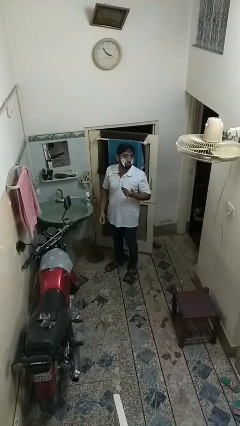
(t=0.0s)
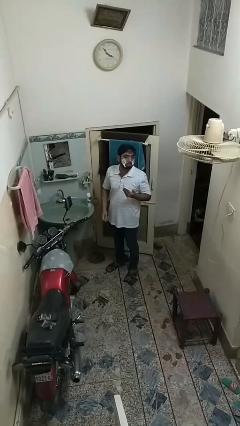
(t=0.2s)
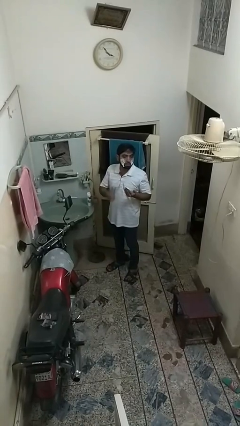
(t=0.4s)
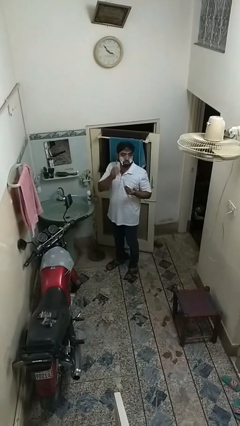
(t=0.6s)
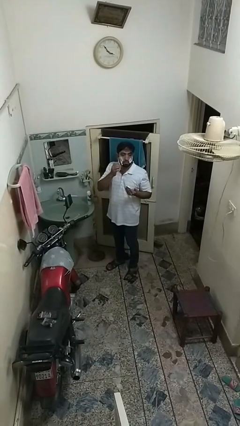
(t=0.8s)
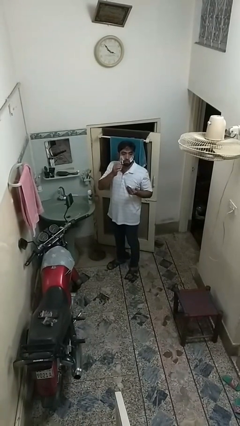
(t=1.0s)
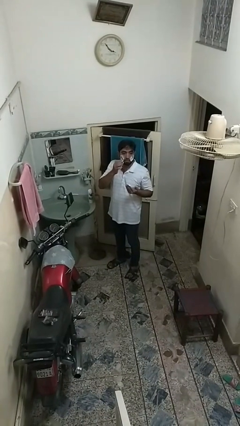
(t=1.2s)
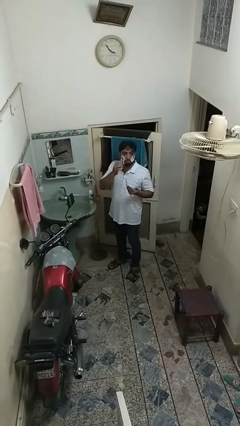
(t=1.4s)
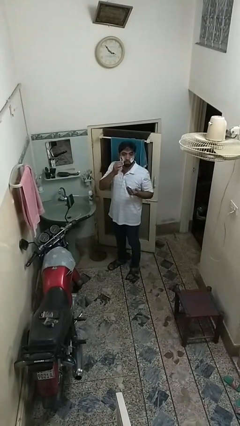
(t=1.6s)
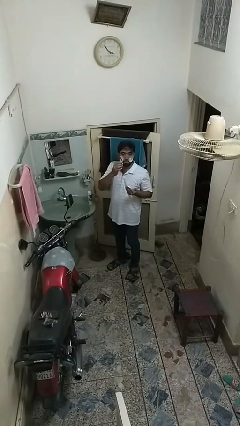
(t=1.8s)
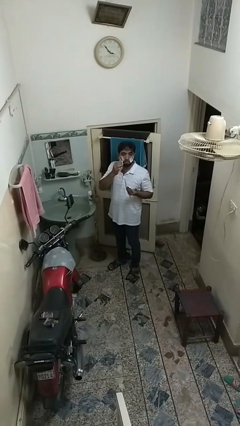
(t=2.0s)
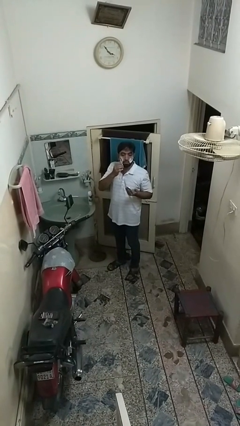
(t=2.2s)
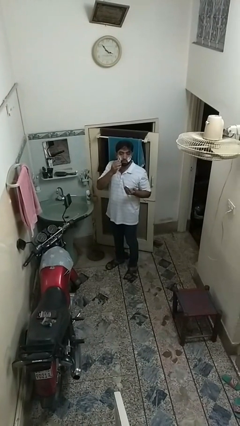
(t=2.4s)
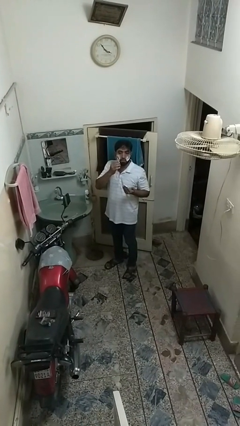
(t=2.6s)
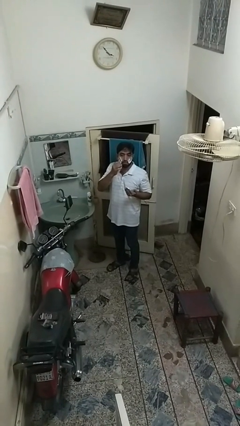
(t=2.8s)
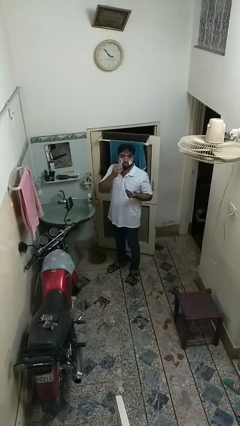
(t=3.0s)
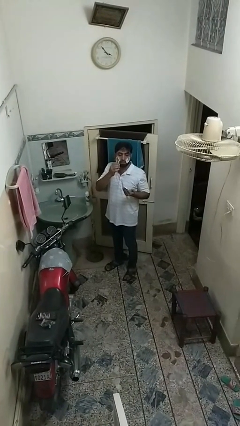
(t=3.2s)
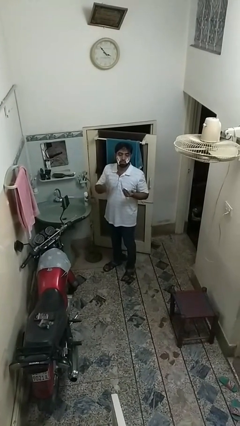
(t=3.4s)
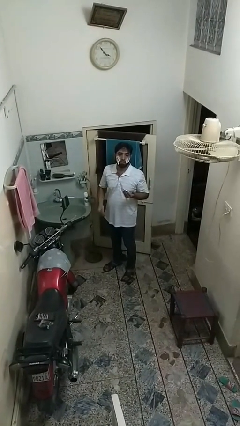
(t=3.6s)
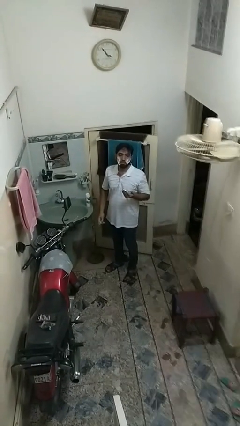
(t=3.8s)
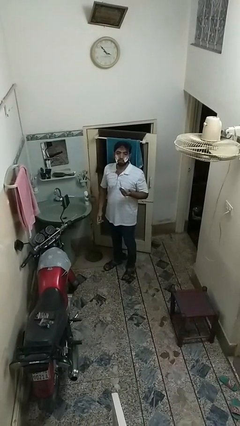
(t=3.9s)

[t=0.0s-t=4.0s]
person shaves face

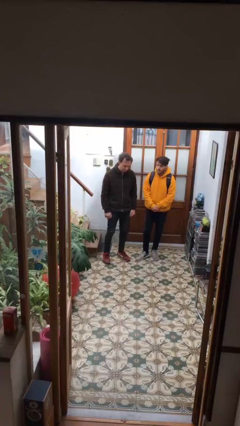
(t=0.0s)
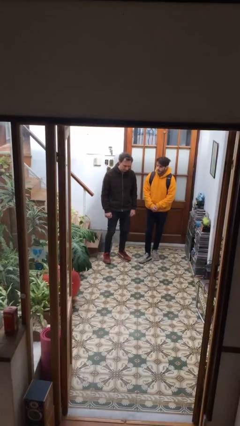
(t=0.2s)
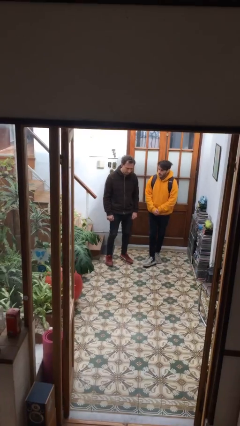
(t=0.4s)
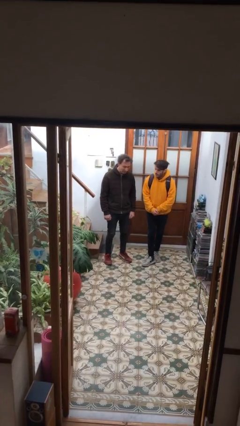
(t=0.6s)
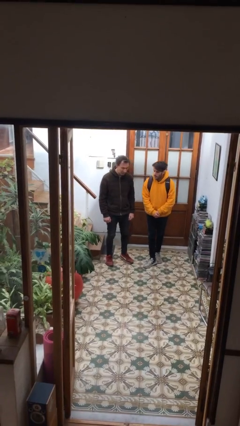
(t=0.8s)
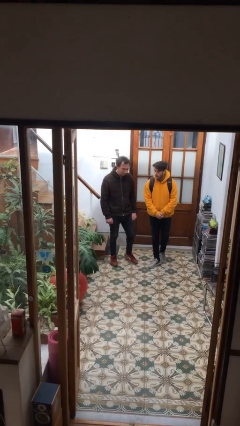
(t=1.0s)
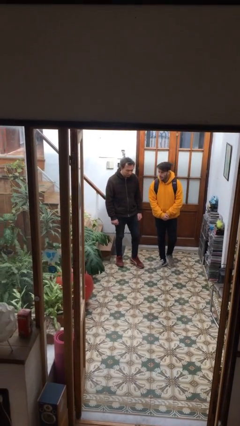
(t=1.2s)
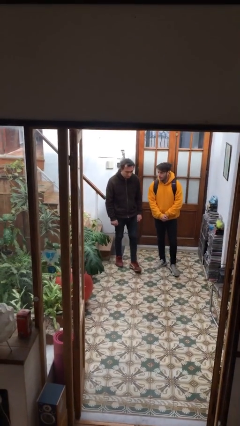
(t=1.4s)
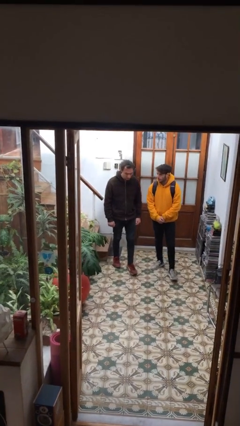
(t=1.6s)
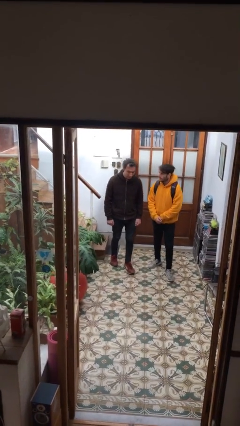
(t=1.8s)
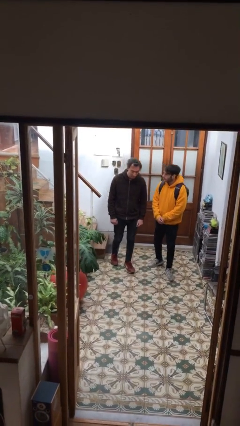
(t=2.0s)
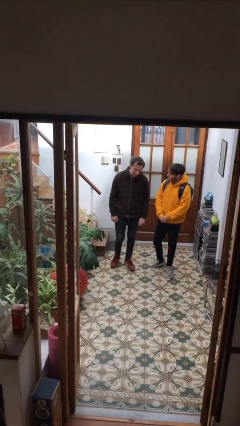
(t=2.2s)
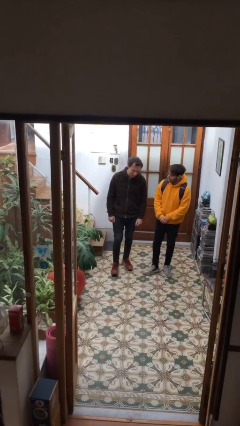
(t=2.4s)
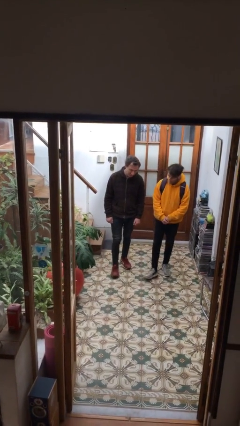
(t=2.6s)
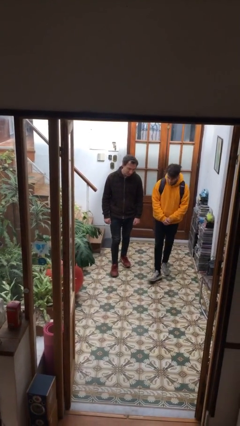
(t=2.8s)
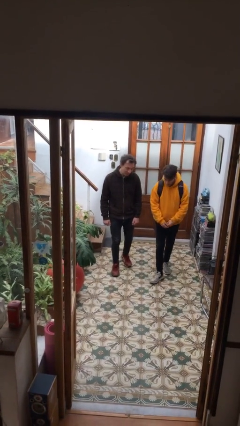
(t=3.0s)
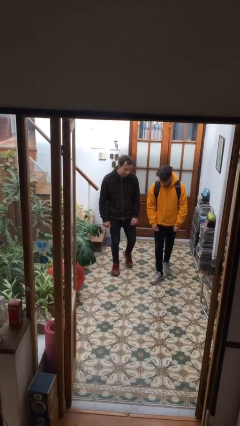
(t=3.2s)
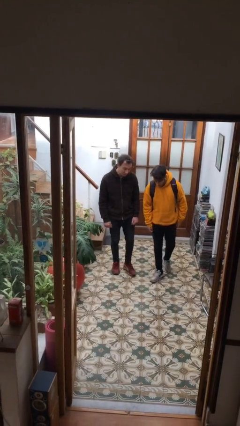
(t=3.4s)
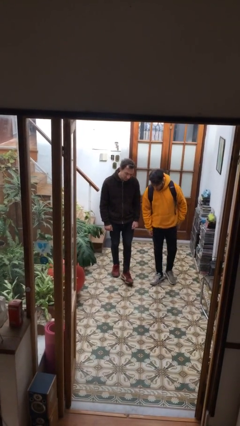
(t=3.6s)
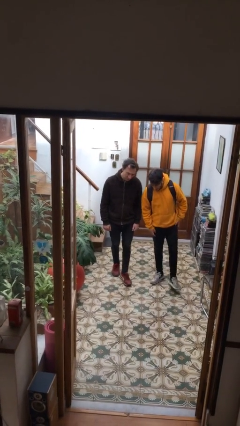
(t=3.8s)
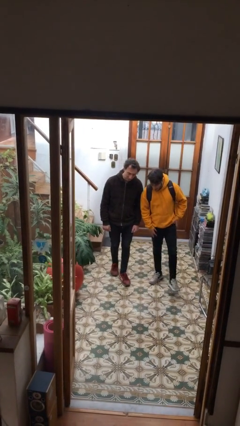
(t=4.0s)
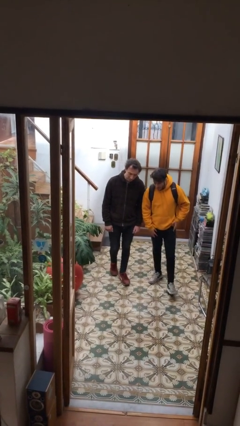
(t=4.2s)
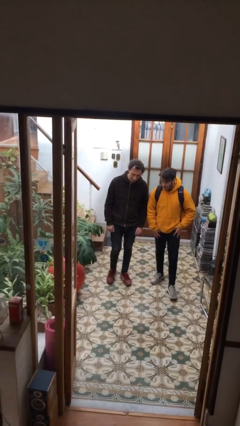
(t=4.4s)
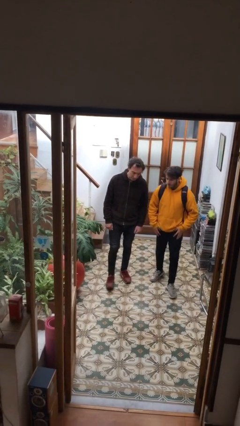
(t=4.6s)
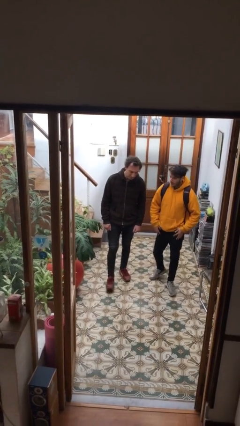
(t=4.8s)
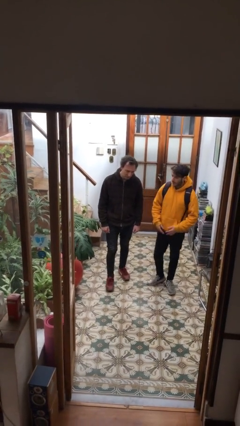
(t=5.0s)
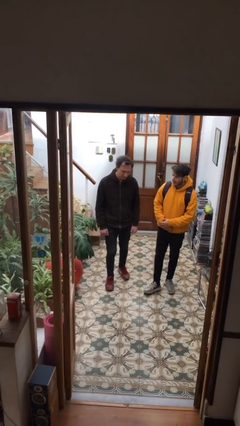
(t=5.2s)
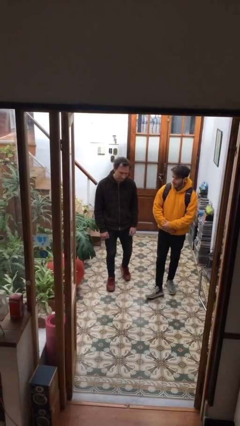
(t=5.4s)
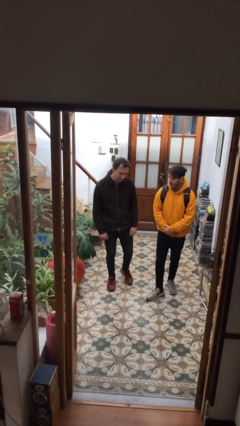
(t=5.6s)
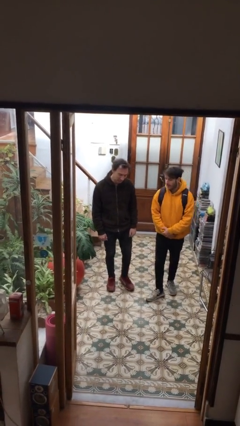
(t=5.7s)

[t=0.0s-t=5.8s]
person talks to person

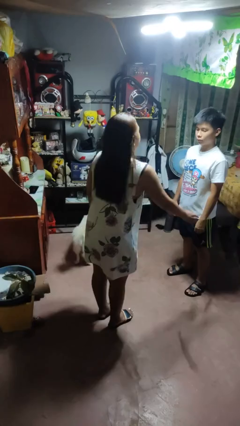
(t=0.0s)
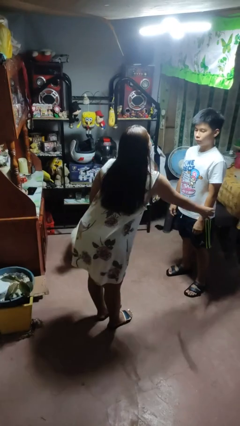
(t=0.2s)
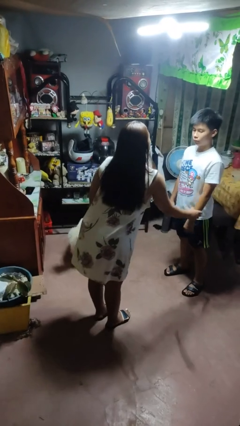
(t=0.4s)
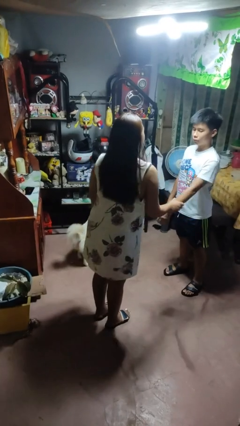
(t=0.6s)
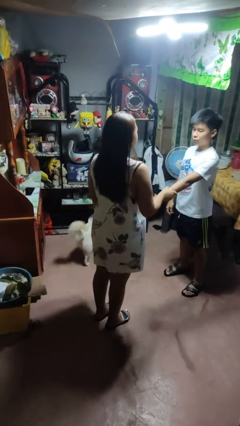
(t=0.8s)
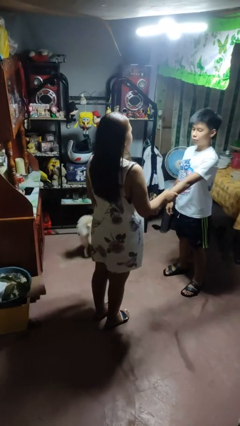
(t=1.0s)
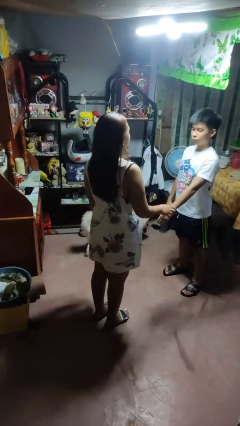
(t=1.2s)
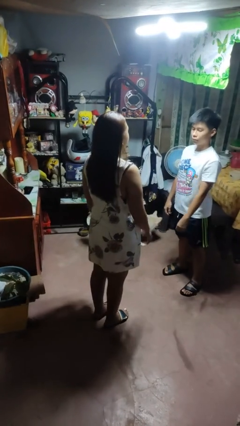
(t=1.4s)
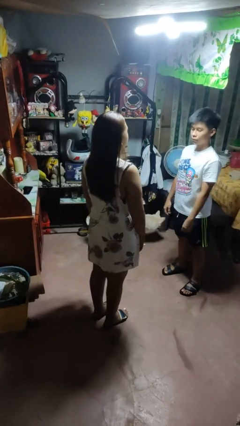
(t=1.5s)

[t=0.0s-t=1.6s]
person grabs person by forearm

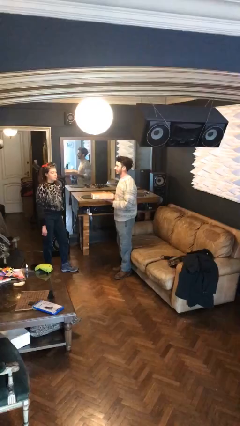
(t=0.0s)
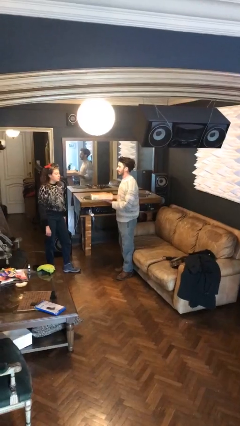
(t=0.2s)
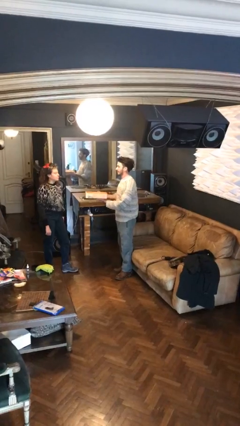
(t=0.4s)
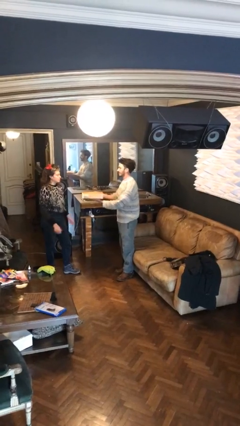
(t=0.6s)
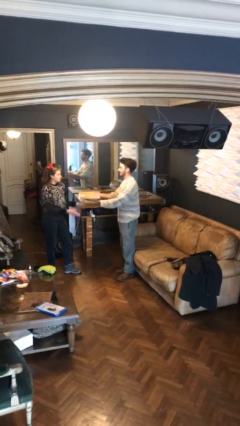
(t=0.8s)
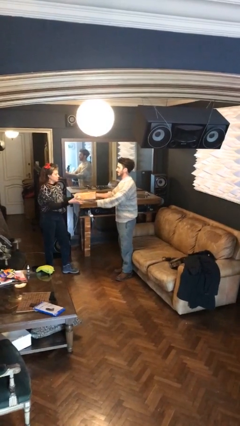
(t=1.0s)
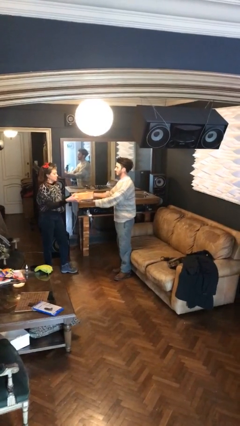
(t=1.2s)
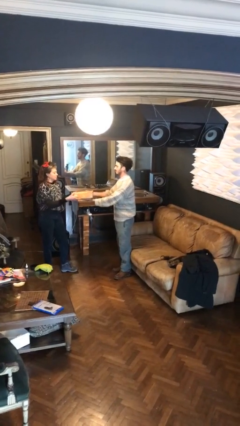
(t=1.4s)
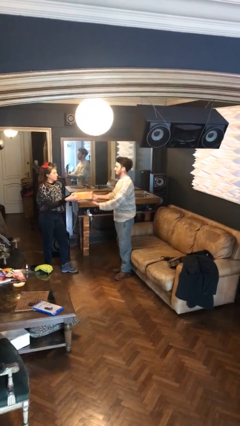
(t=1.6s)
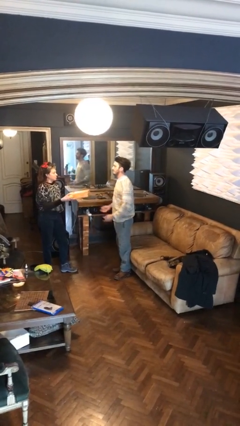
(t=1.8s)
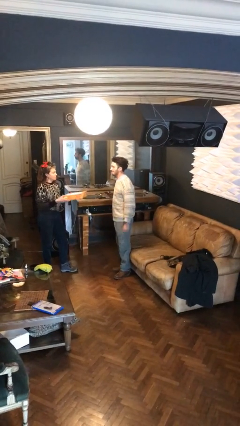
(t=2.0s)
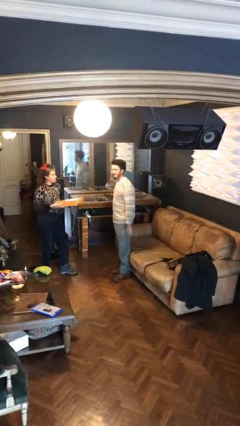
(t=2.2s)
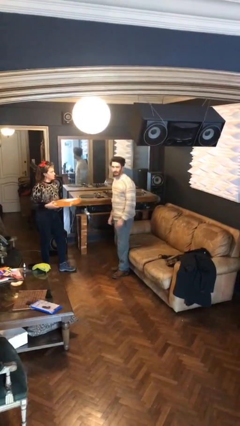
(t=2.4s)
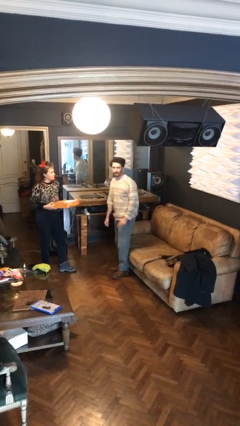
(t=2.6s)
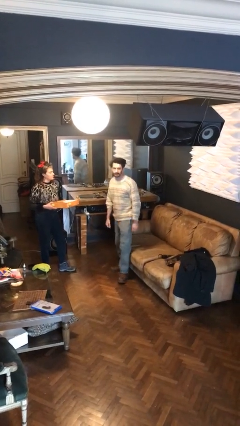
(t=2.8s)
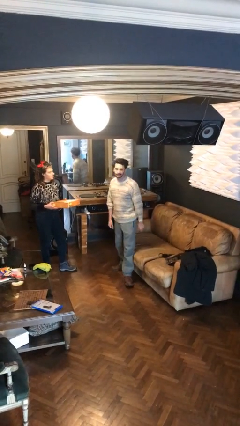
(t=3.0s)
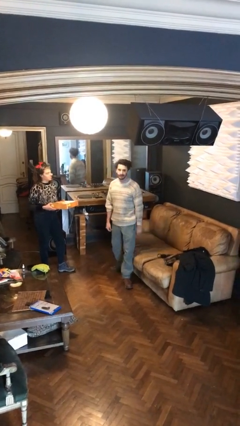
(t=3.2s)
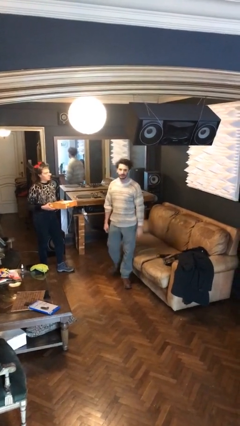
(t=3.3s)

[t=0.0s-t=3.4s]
person transfers object to person

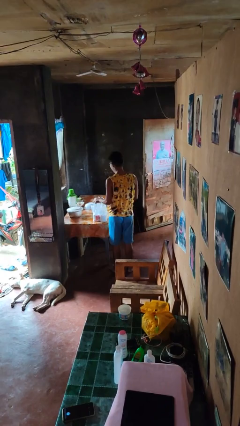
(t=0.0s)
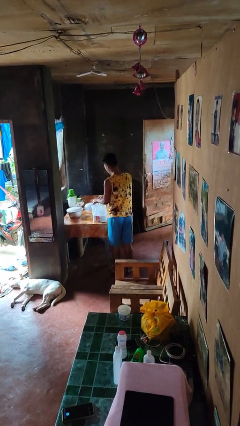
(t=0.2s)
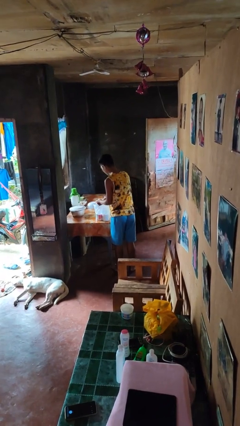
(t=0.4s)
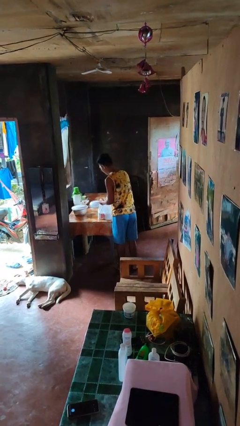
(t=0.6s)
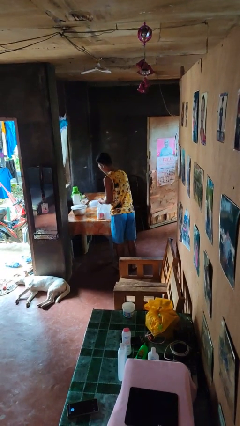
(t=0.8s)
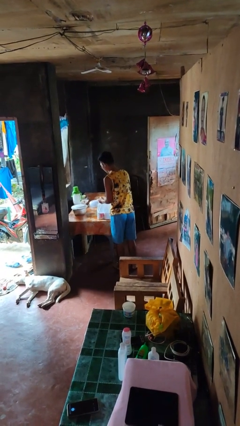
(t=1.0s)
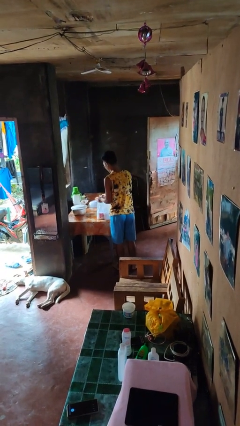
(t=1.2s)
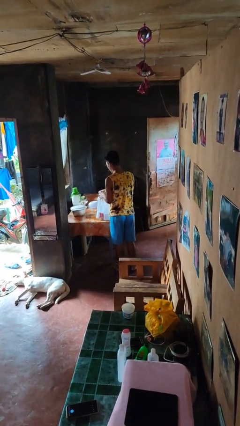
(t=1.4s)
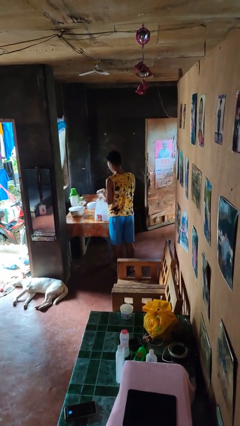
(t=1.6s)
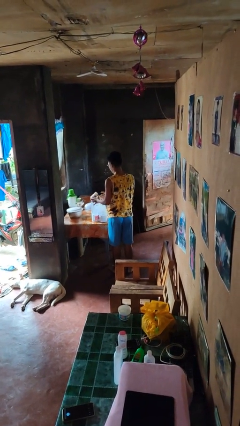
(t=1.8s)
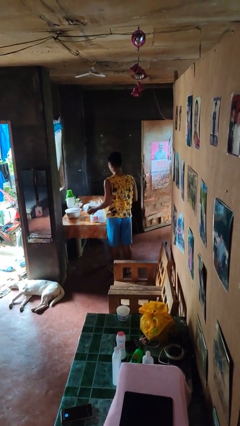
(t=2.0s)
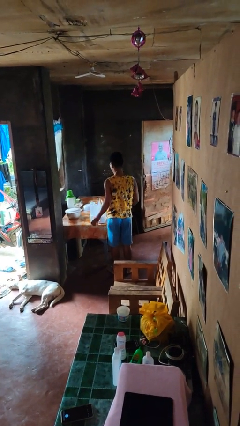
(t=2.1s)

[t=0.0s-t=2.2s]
person takes object from bag

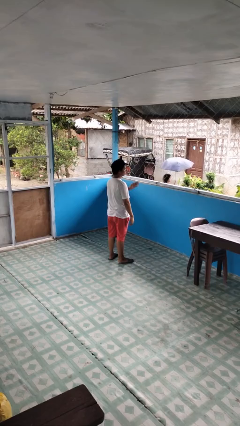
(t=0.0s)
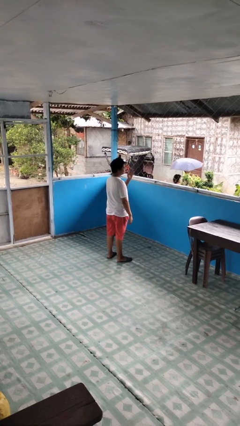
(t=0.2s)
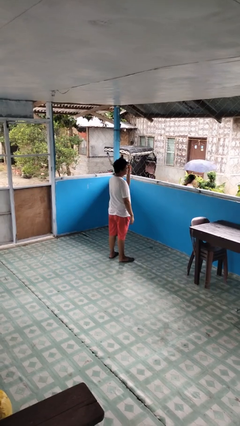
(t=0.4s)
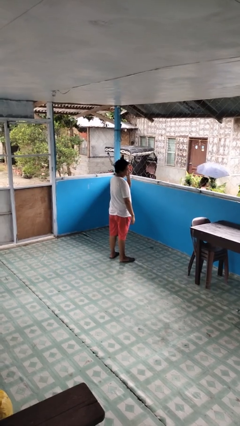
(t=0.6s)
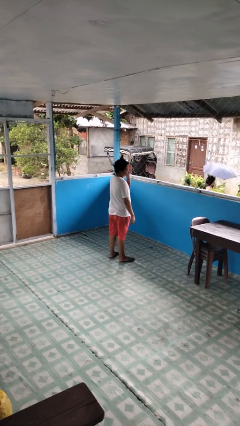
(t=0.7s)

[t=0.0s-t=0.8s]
person swats bug
